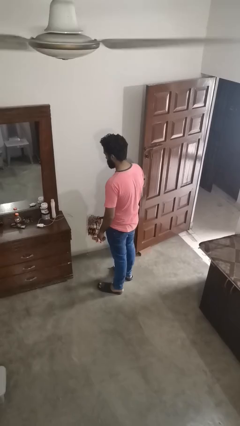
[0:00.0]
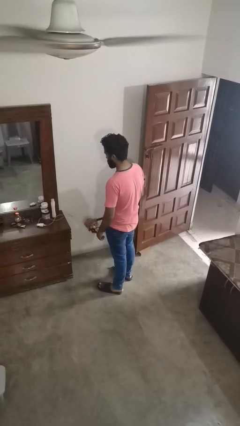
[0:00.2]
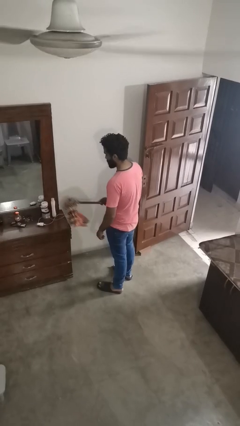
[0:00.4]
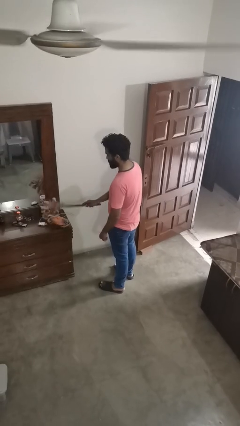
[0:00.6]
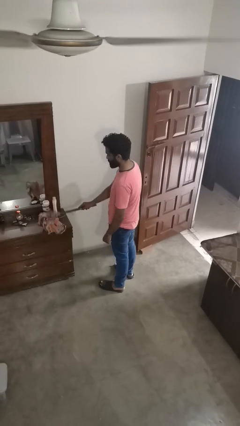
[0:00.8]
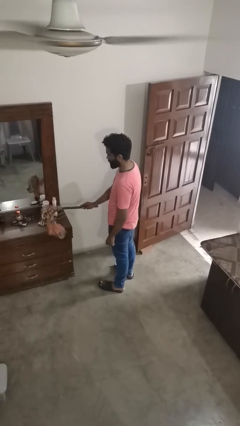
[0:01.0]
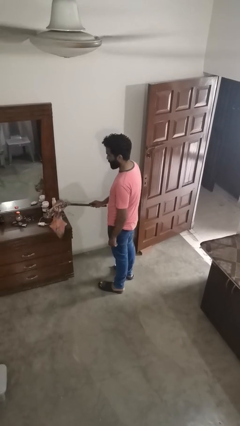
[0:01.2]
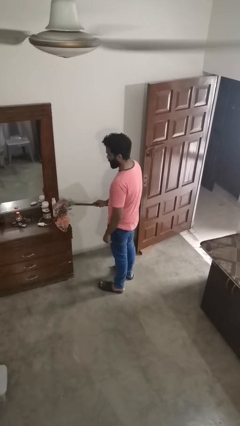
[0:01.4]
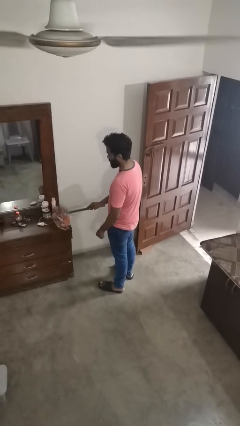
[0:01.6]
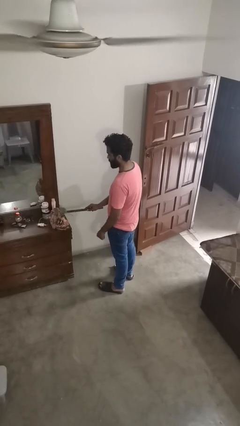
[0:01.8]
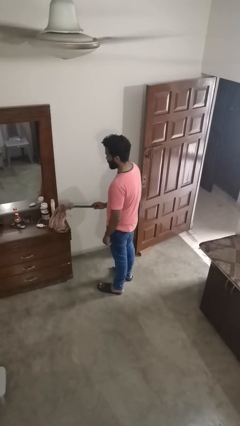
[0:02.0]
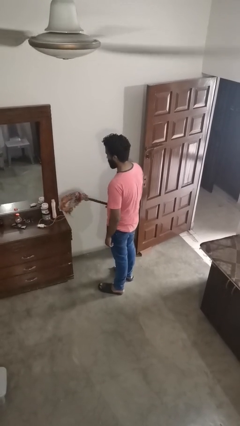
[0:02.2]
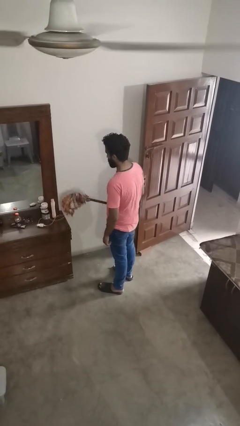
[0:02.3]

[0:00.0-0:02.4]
person dusts furniture

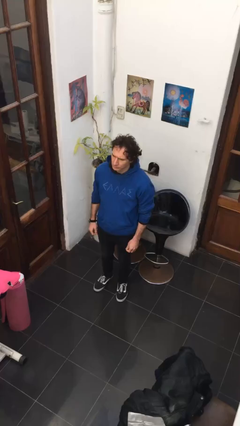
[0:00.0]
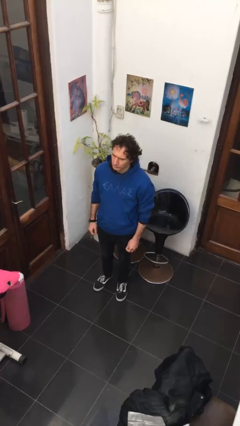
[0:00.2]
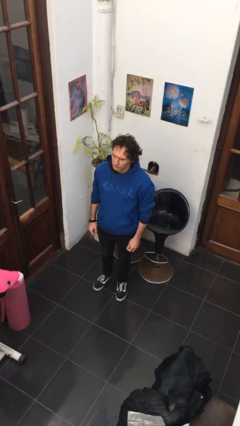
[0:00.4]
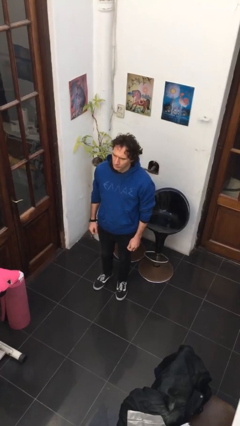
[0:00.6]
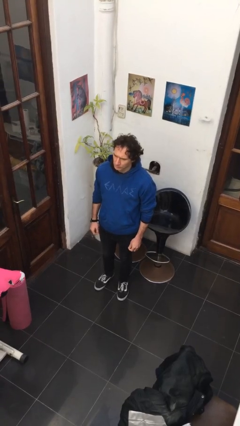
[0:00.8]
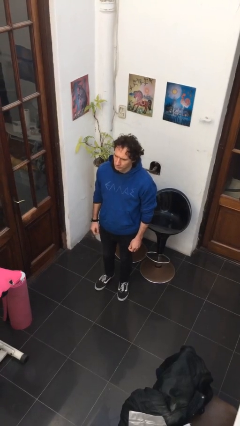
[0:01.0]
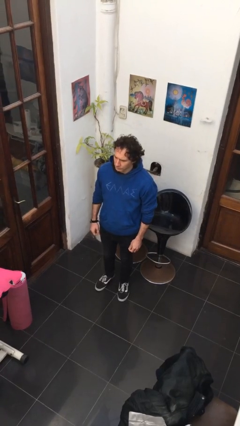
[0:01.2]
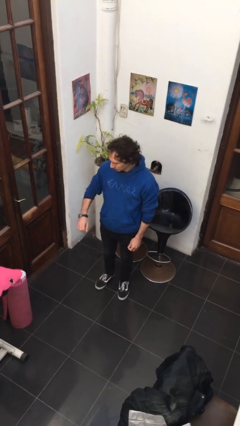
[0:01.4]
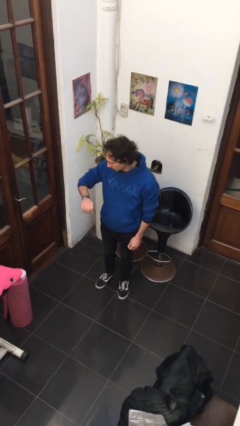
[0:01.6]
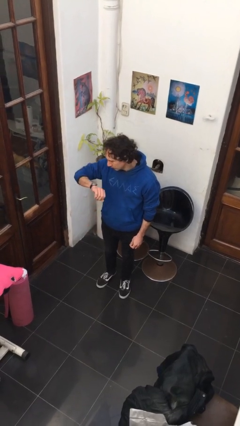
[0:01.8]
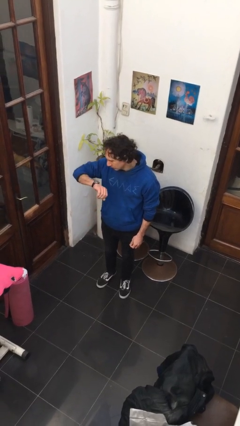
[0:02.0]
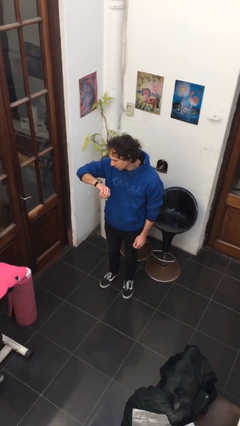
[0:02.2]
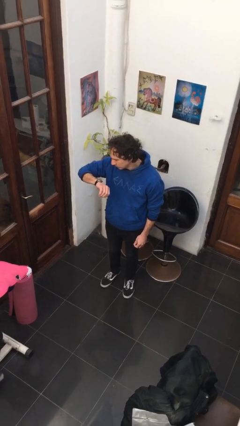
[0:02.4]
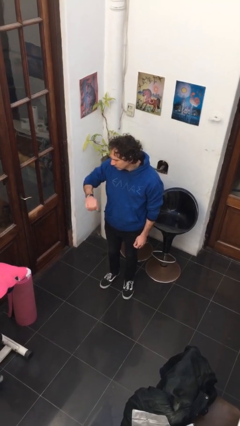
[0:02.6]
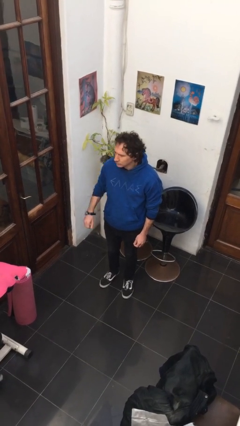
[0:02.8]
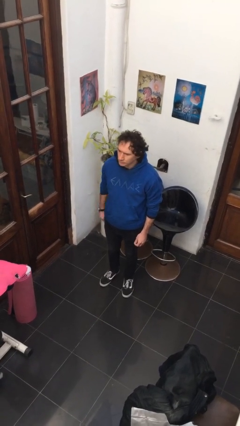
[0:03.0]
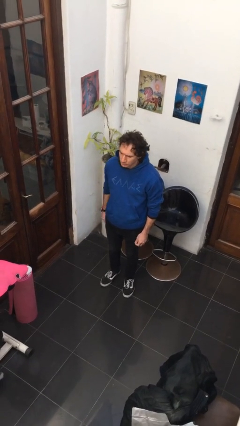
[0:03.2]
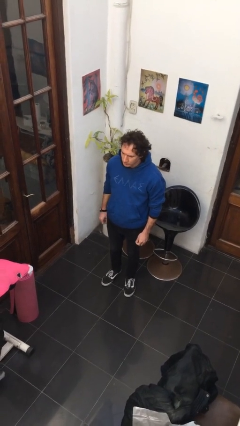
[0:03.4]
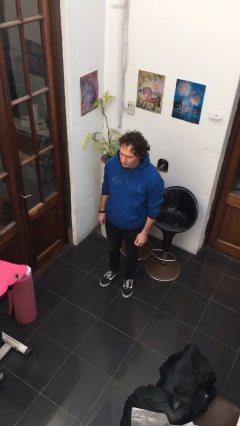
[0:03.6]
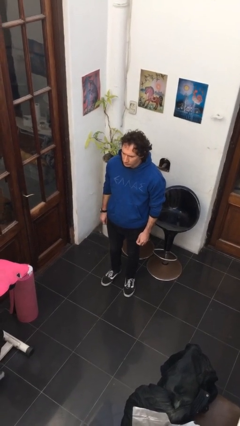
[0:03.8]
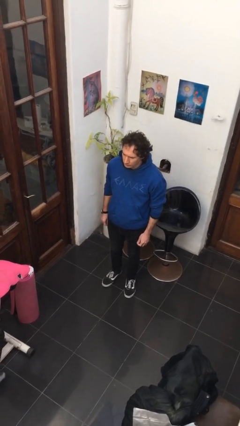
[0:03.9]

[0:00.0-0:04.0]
person looks at wristwatch

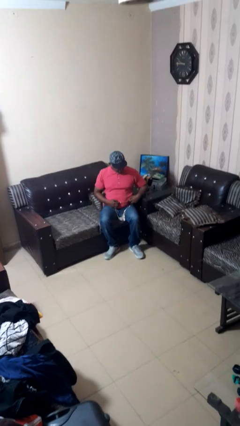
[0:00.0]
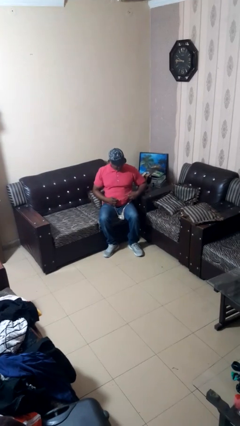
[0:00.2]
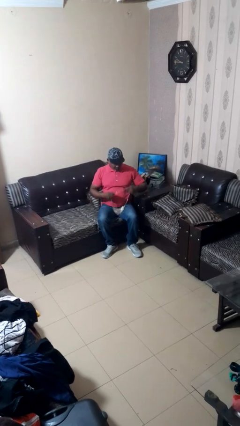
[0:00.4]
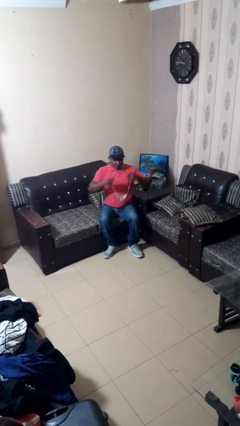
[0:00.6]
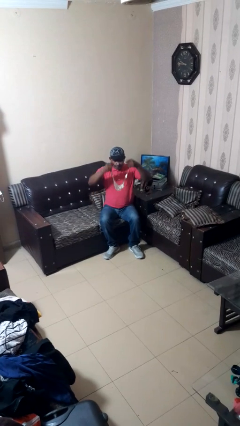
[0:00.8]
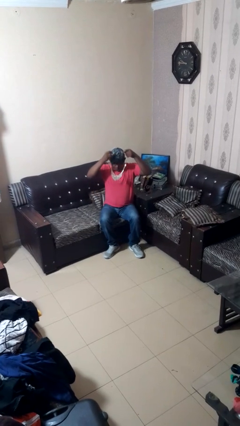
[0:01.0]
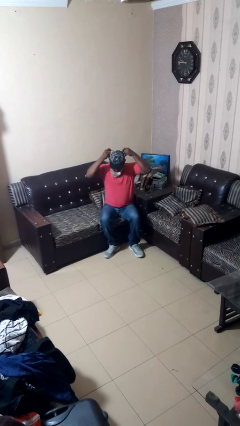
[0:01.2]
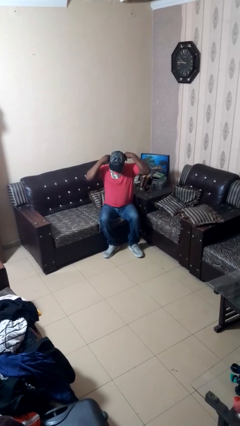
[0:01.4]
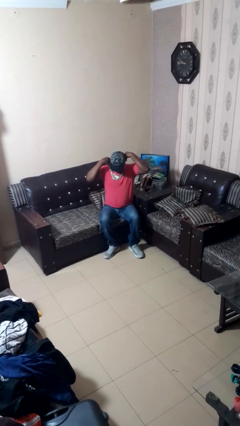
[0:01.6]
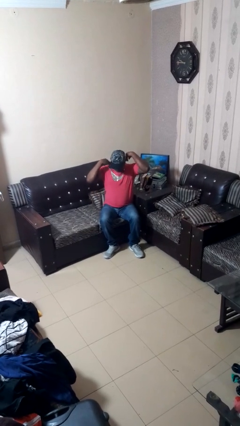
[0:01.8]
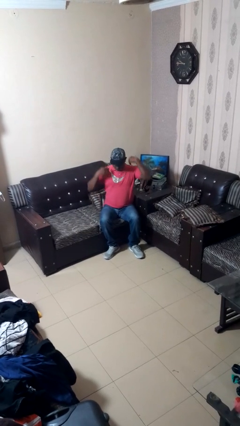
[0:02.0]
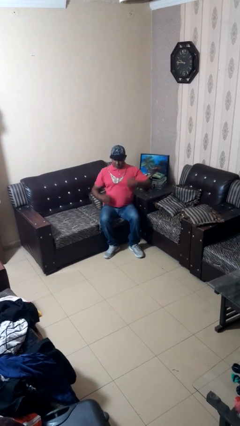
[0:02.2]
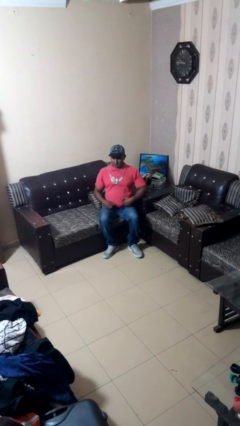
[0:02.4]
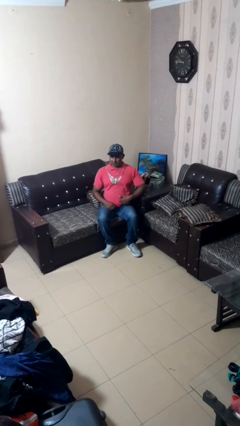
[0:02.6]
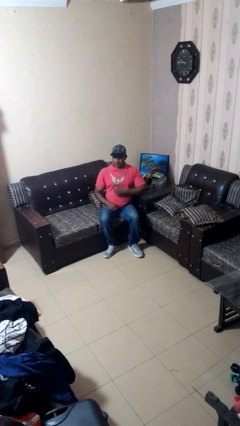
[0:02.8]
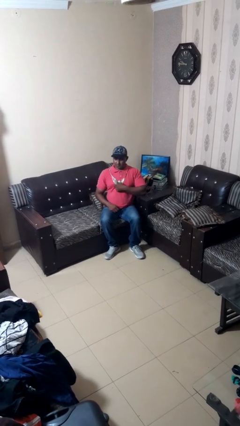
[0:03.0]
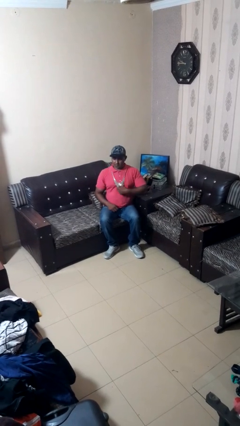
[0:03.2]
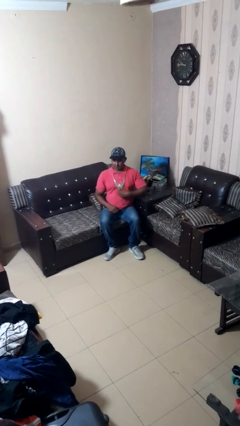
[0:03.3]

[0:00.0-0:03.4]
person puts on necklace

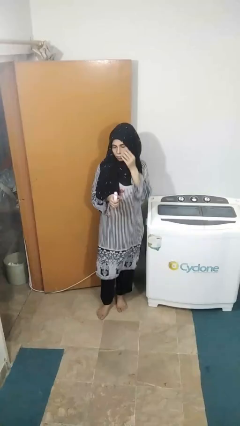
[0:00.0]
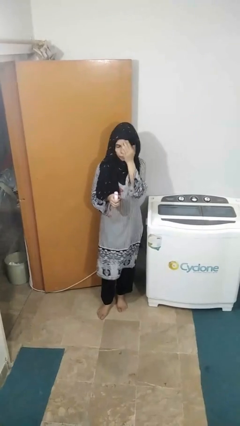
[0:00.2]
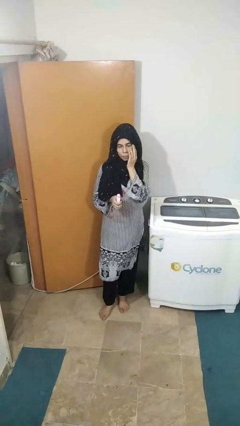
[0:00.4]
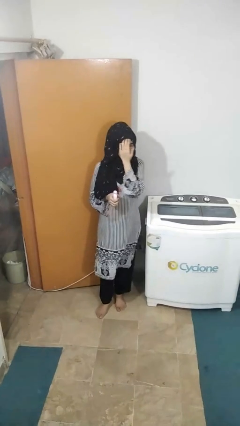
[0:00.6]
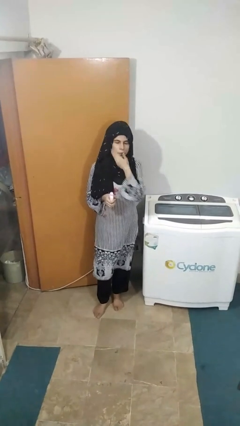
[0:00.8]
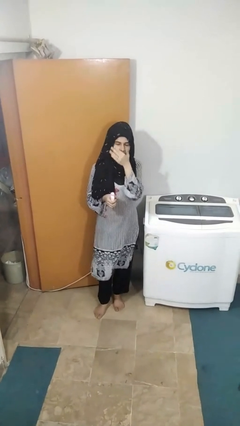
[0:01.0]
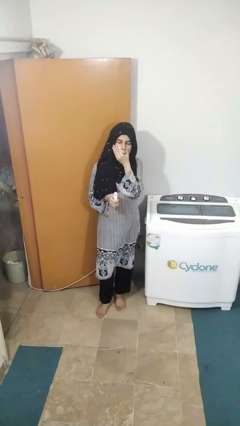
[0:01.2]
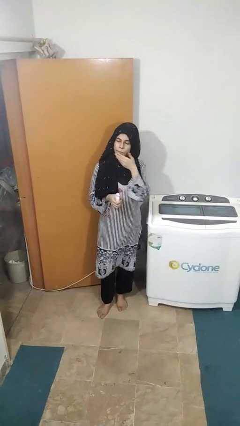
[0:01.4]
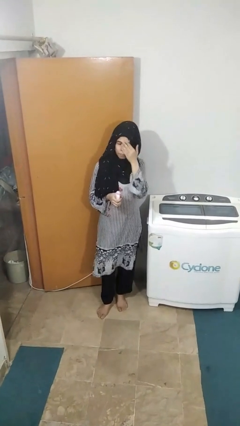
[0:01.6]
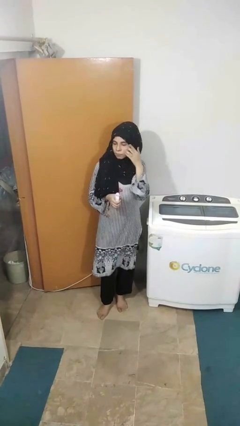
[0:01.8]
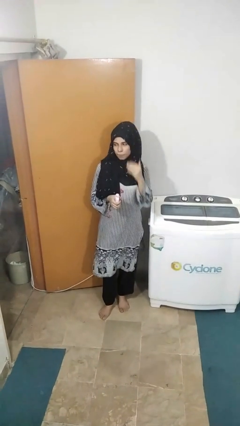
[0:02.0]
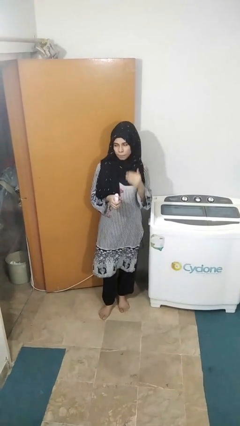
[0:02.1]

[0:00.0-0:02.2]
person extinguishes candle

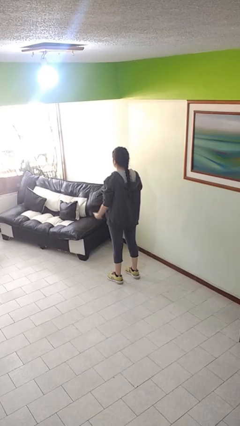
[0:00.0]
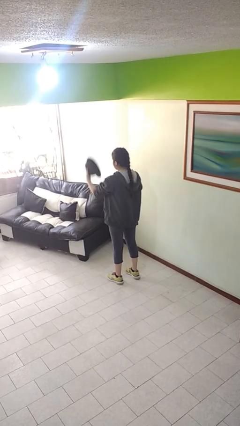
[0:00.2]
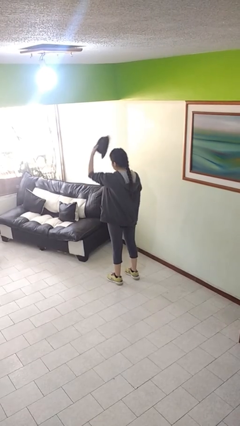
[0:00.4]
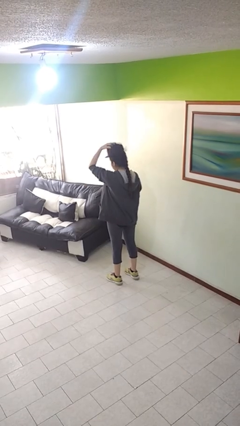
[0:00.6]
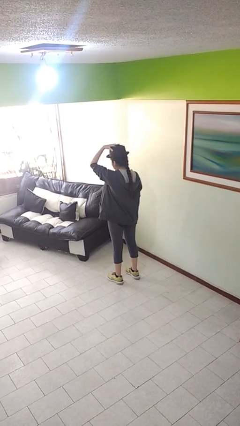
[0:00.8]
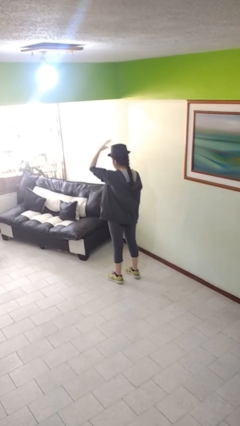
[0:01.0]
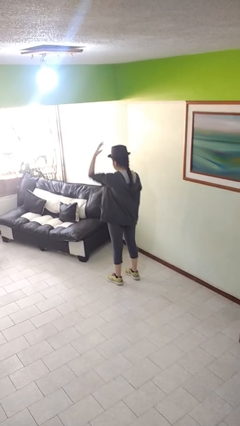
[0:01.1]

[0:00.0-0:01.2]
person puts on hat

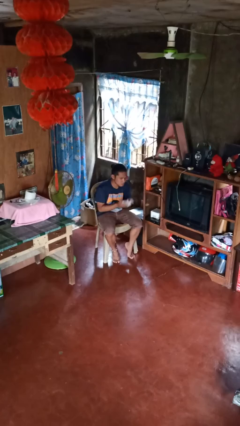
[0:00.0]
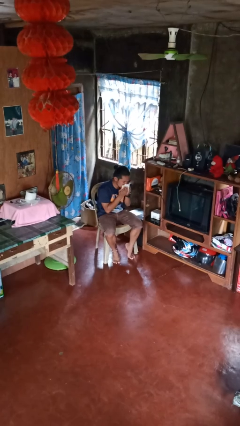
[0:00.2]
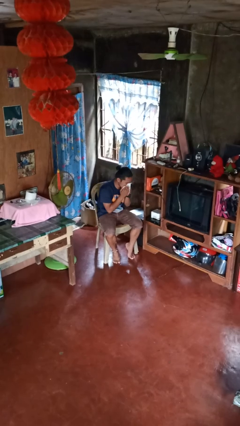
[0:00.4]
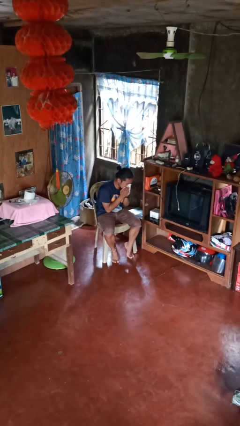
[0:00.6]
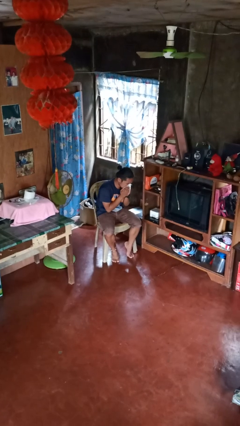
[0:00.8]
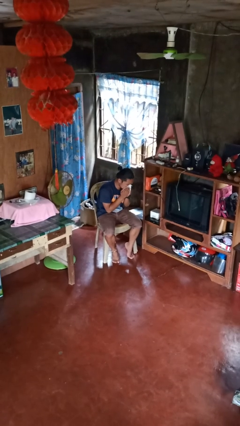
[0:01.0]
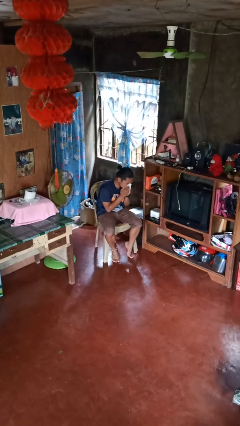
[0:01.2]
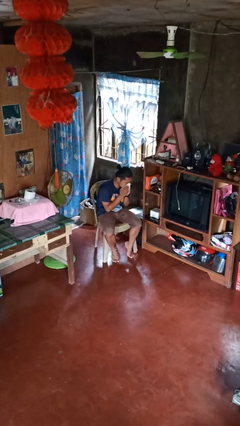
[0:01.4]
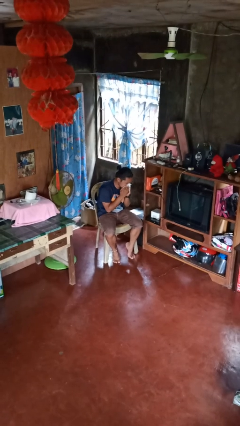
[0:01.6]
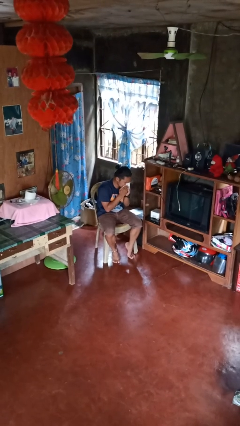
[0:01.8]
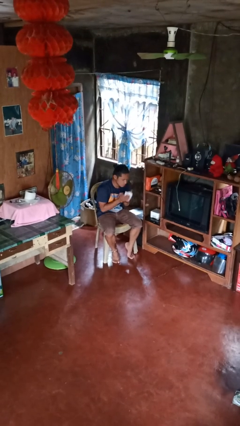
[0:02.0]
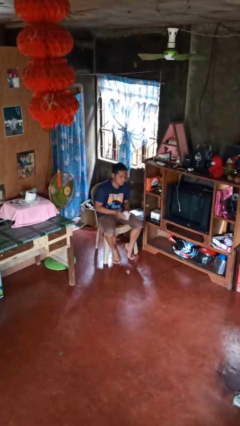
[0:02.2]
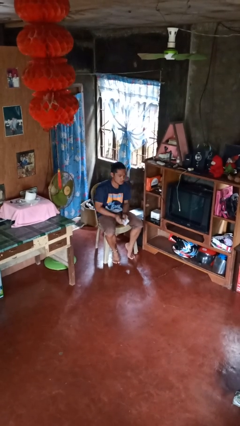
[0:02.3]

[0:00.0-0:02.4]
person blows nose

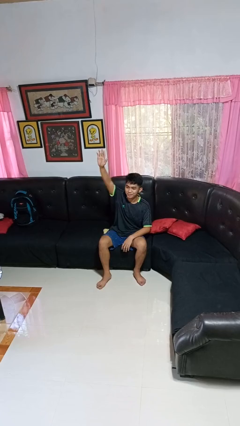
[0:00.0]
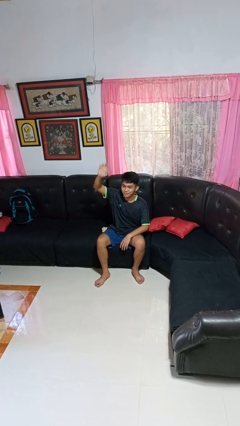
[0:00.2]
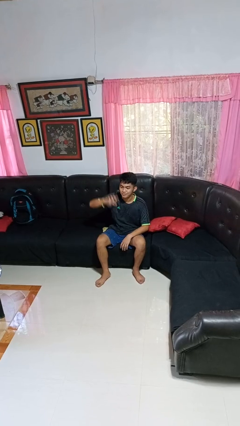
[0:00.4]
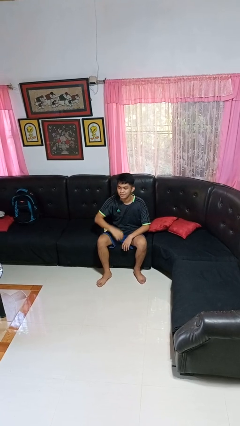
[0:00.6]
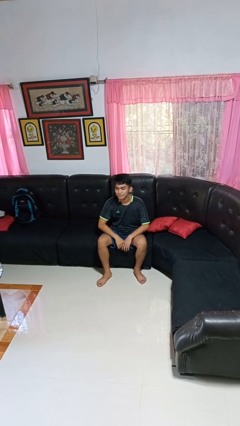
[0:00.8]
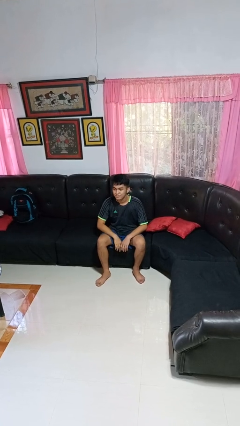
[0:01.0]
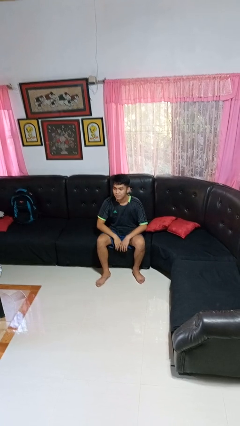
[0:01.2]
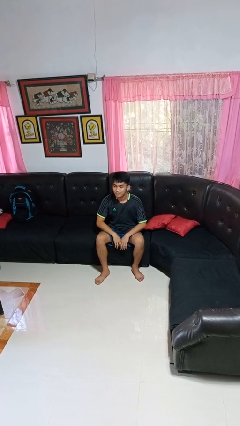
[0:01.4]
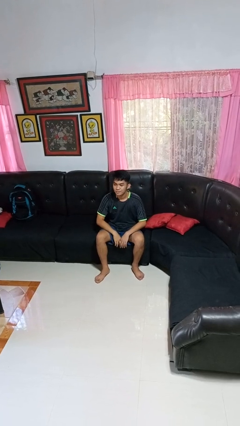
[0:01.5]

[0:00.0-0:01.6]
person gestures lower hand
